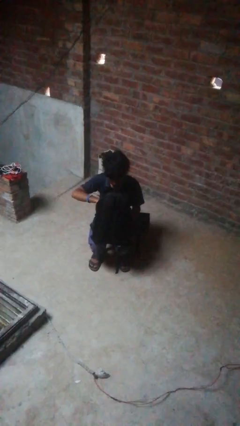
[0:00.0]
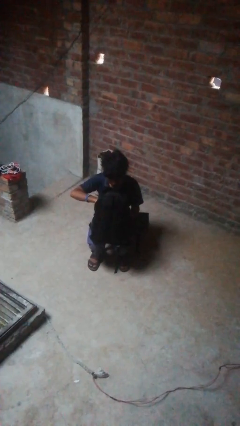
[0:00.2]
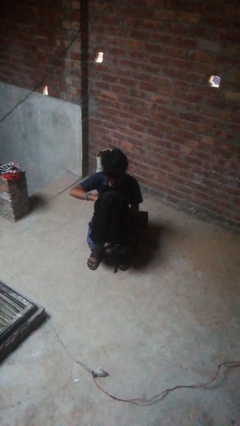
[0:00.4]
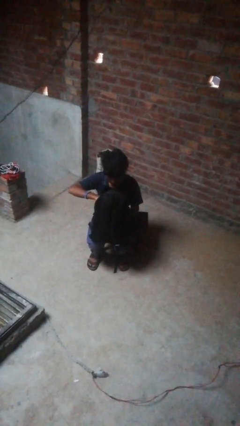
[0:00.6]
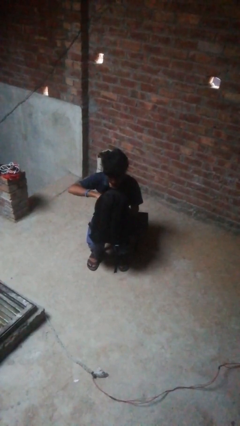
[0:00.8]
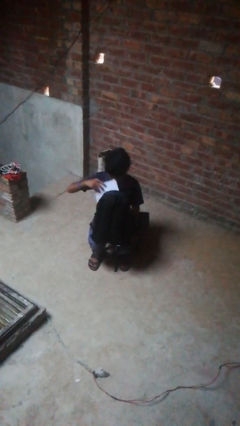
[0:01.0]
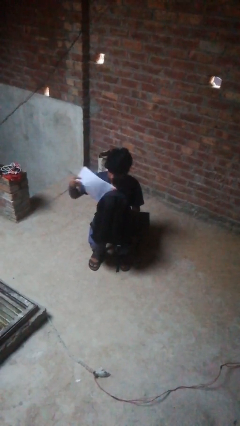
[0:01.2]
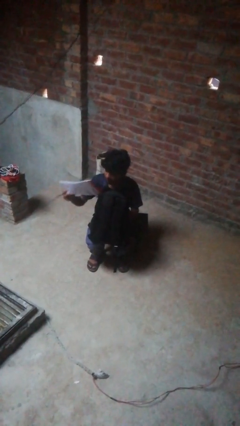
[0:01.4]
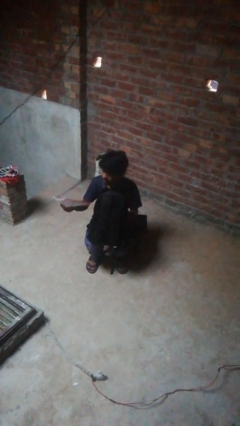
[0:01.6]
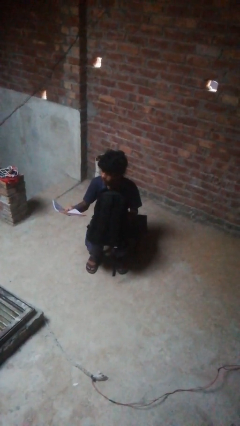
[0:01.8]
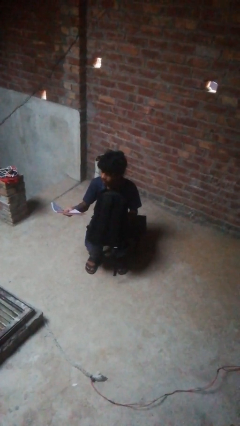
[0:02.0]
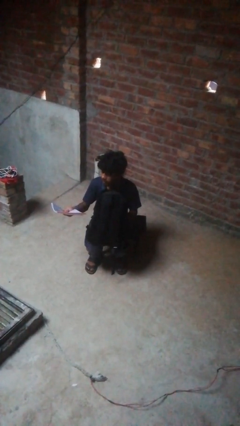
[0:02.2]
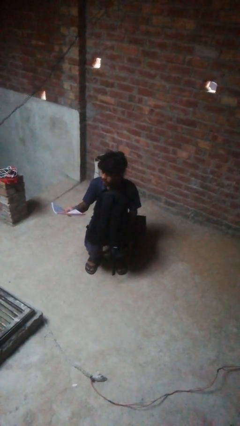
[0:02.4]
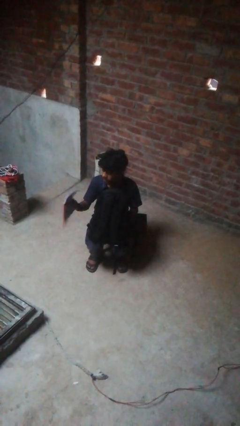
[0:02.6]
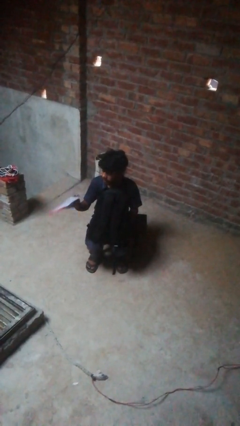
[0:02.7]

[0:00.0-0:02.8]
person takes object from backpack

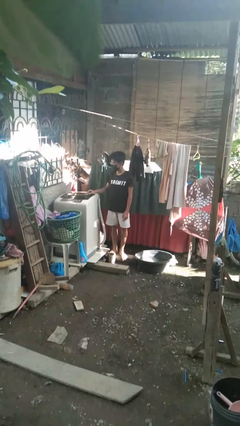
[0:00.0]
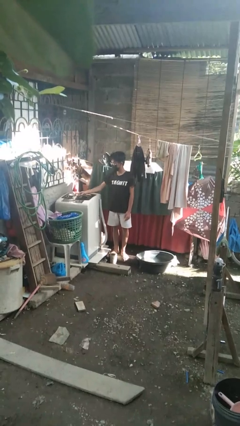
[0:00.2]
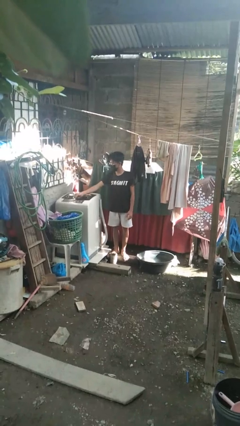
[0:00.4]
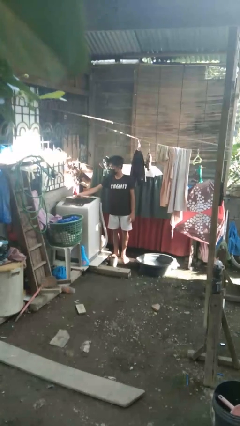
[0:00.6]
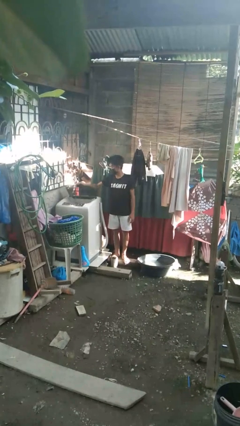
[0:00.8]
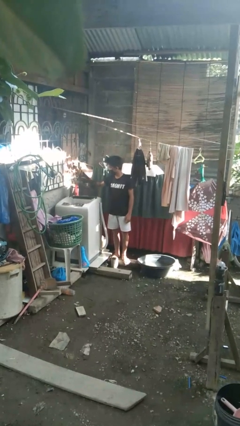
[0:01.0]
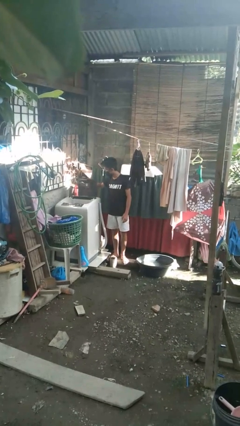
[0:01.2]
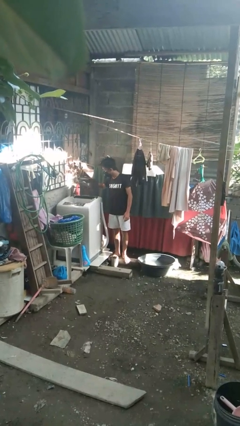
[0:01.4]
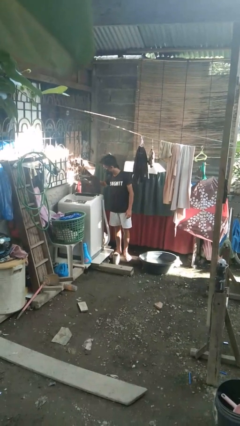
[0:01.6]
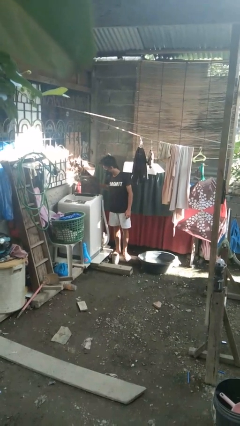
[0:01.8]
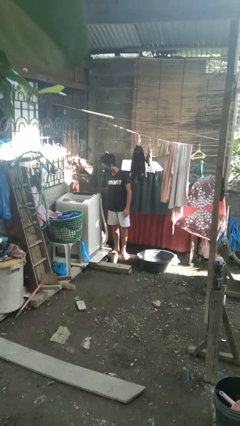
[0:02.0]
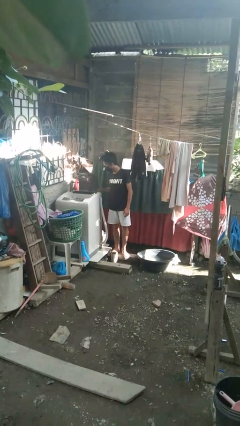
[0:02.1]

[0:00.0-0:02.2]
person opens clothes washer

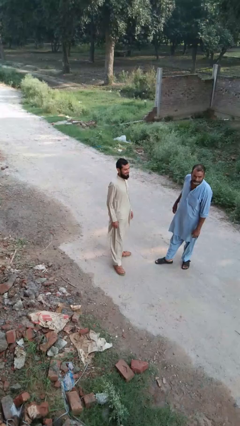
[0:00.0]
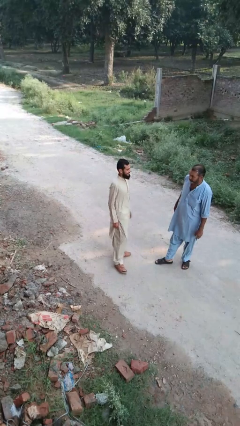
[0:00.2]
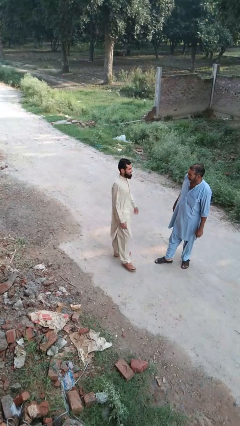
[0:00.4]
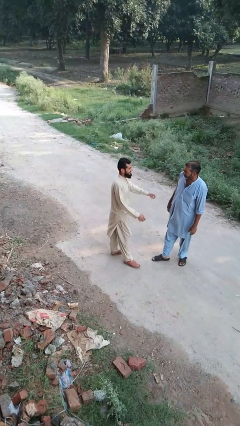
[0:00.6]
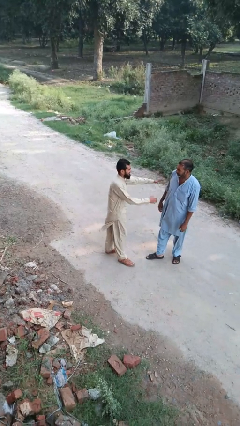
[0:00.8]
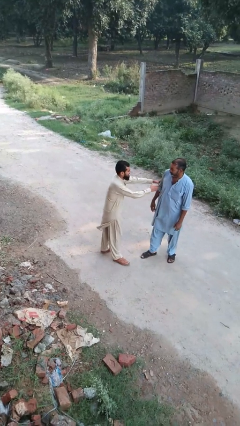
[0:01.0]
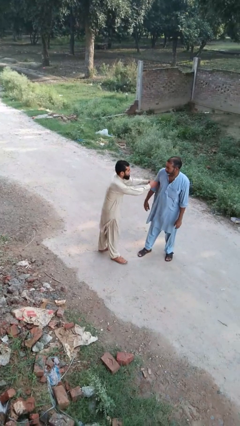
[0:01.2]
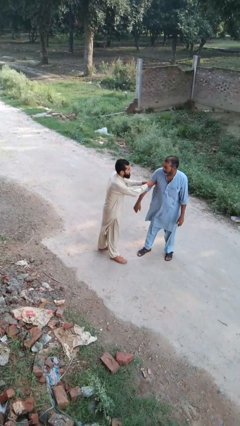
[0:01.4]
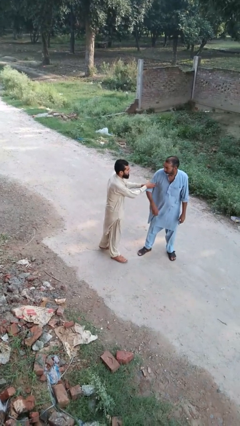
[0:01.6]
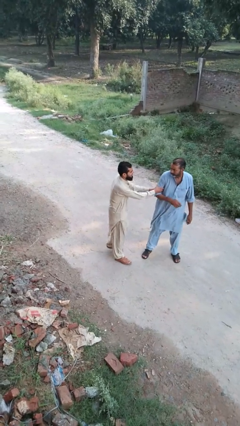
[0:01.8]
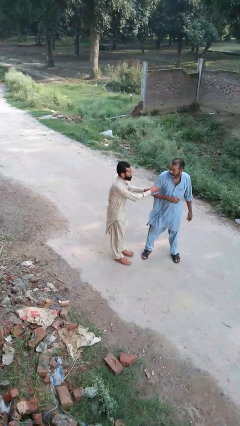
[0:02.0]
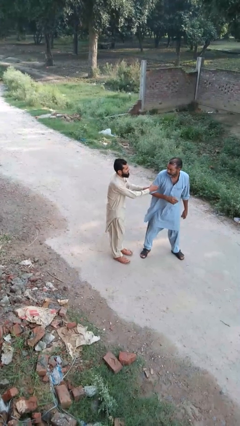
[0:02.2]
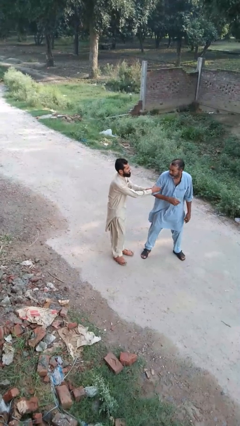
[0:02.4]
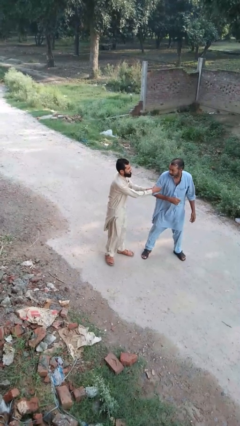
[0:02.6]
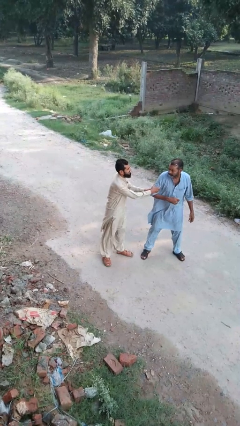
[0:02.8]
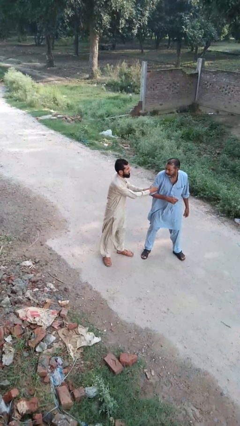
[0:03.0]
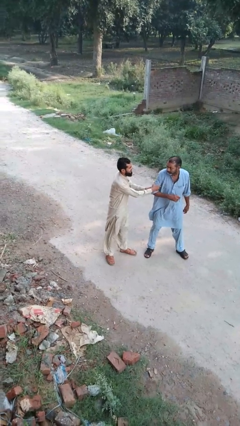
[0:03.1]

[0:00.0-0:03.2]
person grabs person by forearm

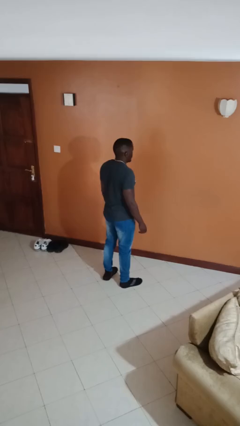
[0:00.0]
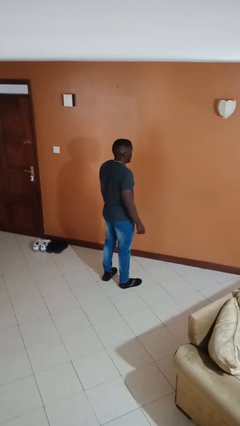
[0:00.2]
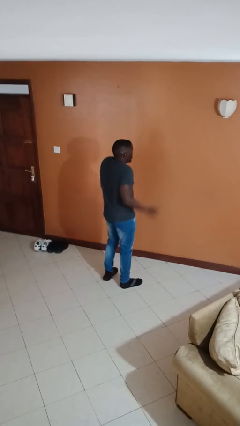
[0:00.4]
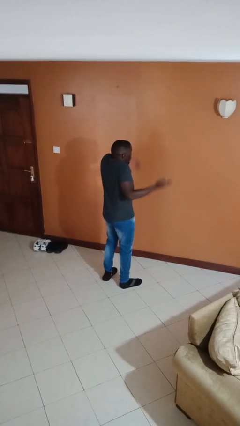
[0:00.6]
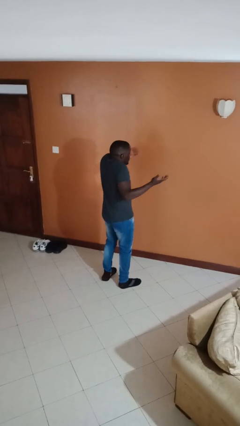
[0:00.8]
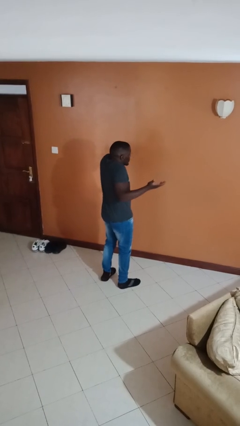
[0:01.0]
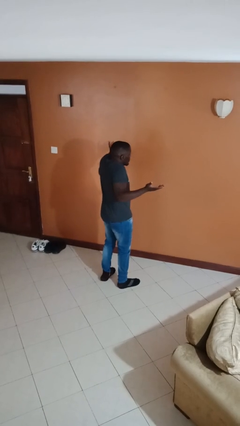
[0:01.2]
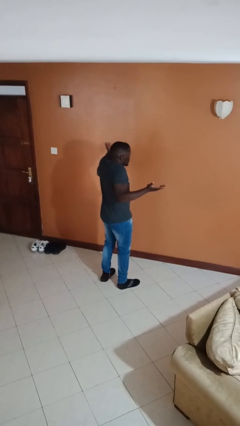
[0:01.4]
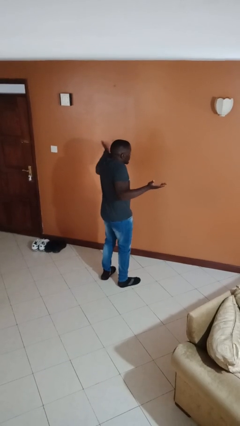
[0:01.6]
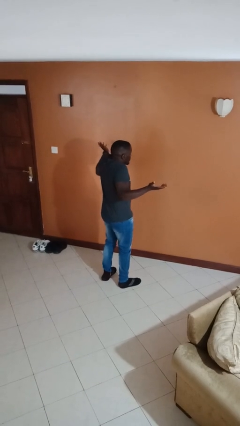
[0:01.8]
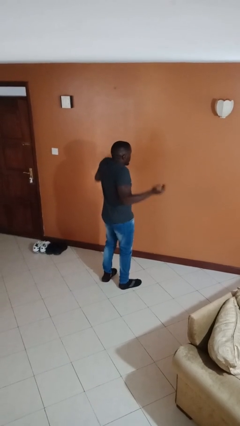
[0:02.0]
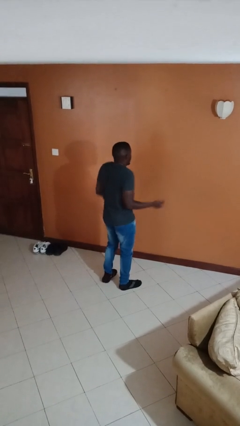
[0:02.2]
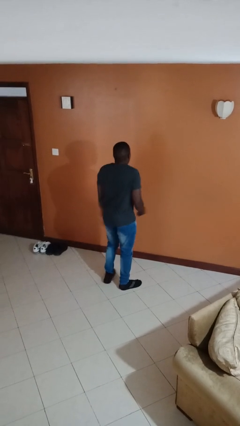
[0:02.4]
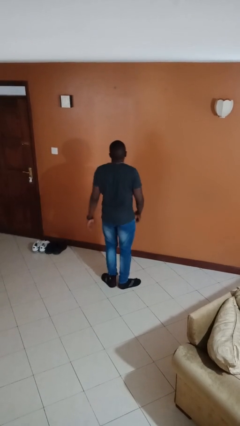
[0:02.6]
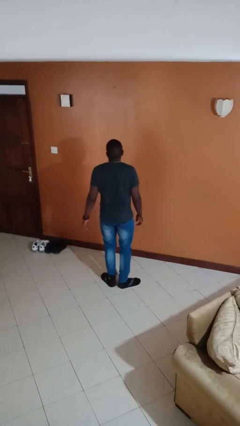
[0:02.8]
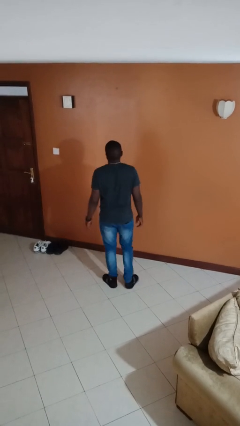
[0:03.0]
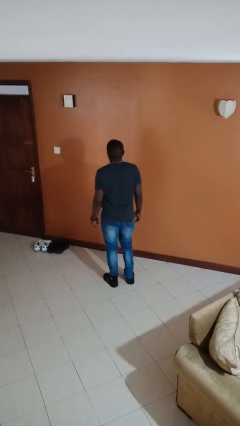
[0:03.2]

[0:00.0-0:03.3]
person shrugs

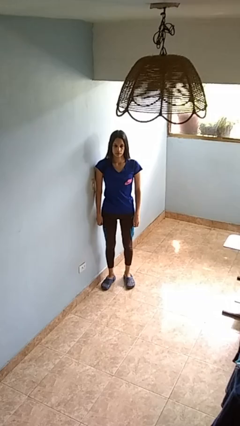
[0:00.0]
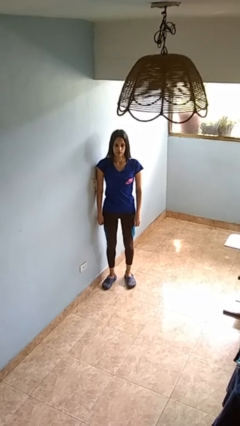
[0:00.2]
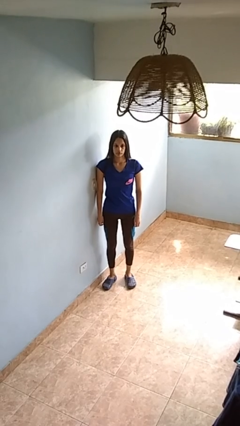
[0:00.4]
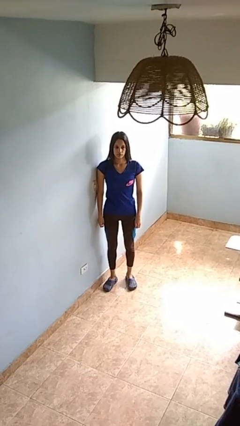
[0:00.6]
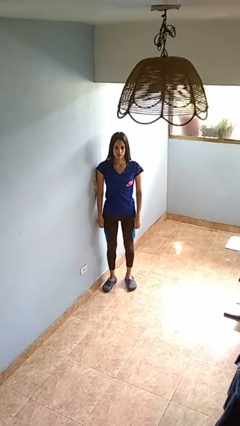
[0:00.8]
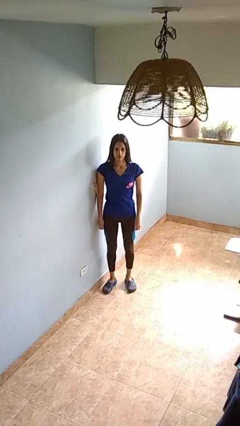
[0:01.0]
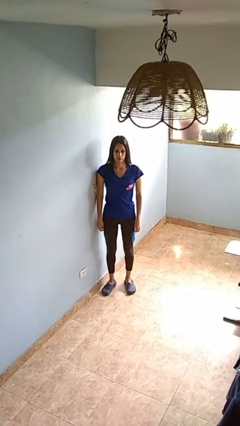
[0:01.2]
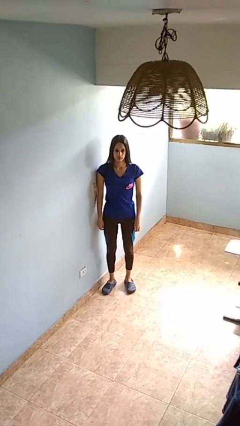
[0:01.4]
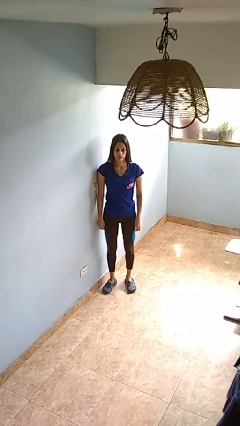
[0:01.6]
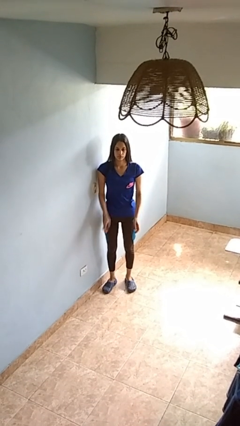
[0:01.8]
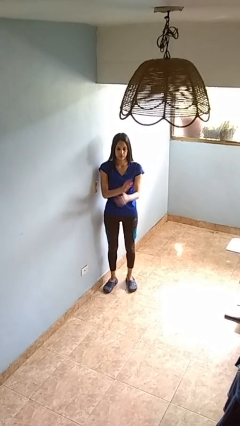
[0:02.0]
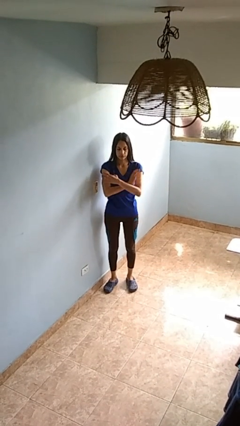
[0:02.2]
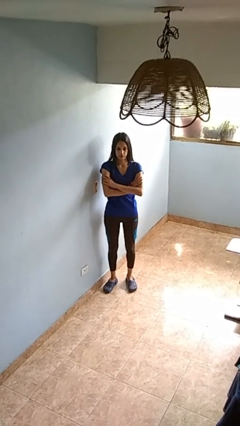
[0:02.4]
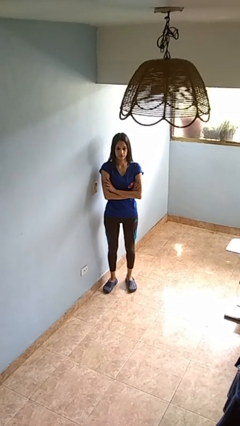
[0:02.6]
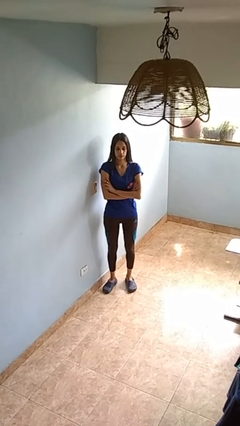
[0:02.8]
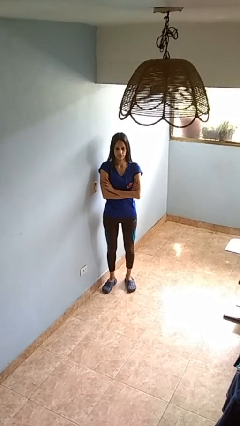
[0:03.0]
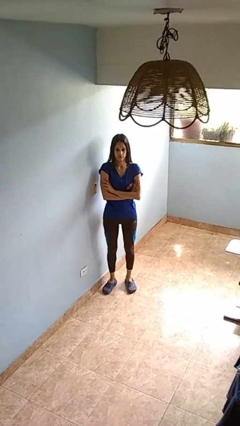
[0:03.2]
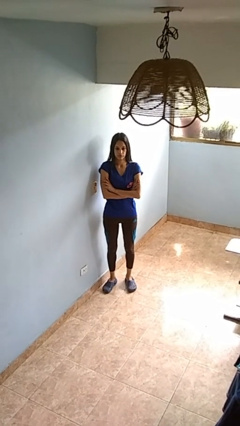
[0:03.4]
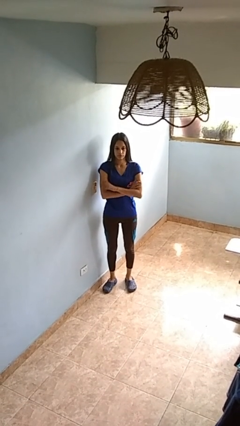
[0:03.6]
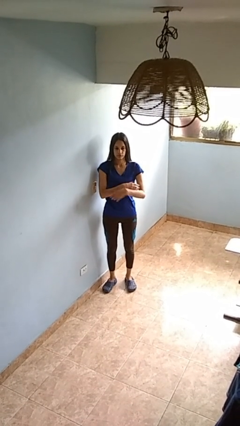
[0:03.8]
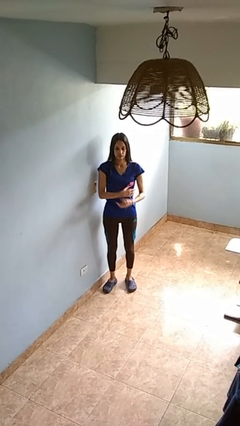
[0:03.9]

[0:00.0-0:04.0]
person crosses arms

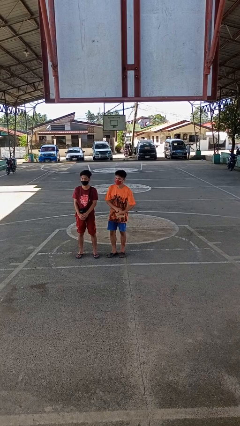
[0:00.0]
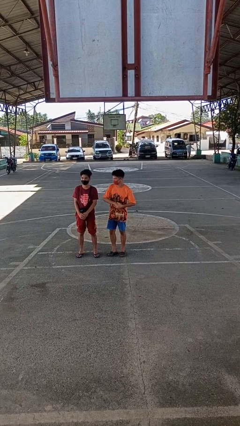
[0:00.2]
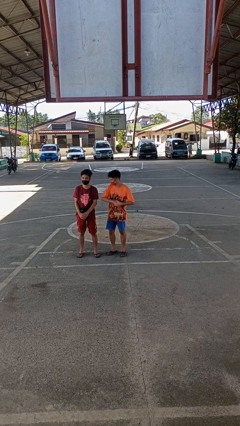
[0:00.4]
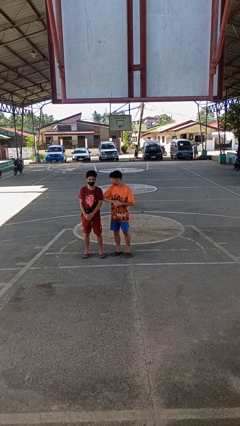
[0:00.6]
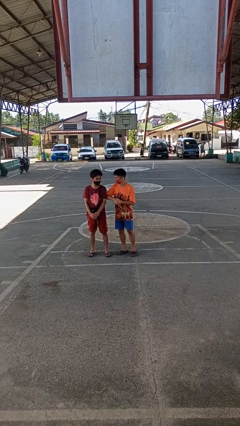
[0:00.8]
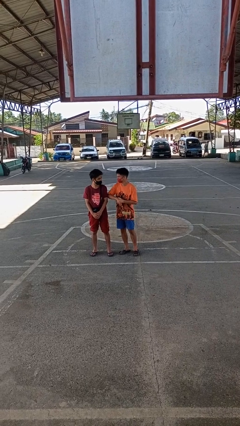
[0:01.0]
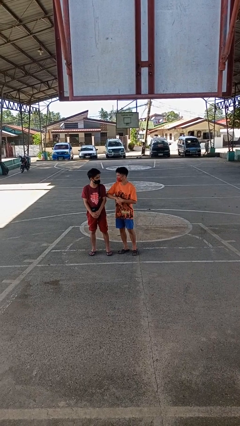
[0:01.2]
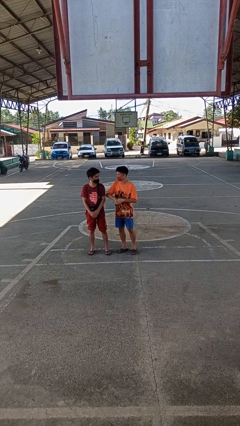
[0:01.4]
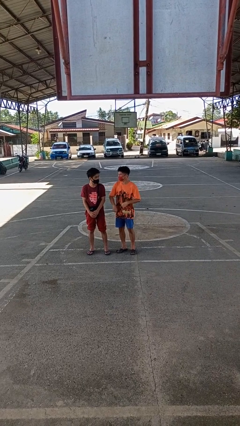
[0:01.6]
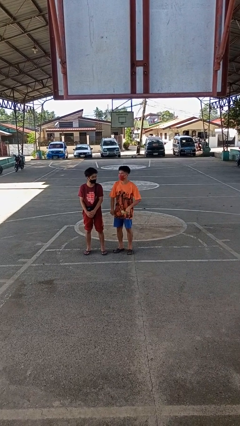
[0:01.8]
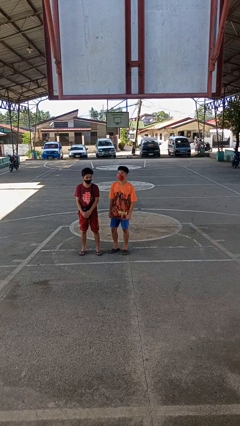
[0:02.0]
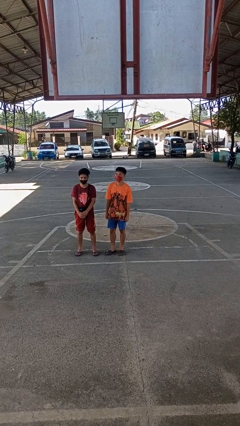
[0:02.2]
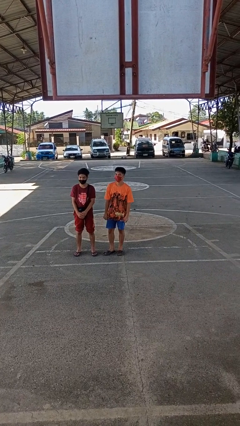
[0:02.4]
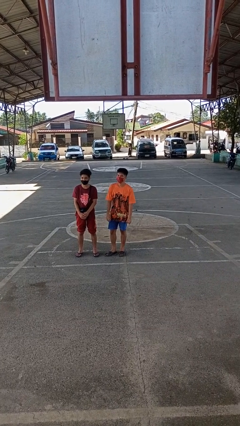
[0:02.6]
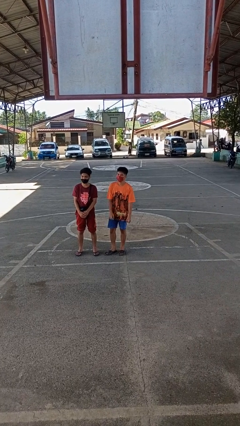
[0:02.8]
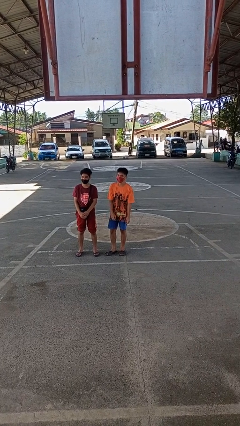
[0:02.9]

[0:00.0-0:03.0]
person nudges person with elbow
